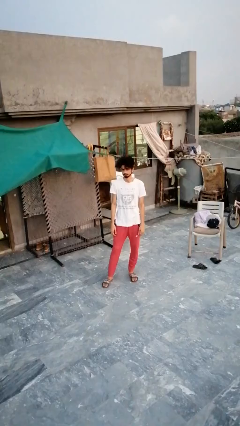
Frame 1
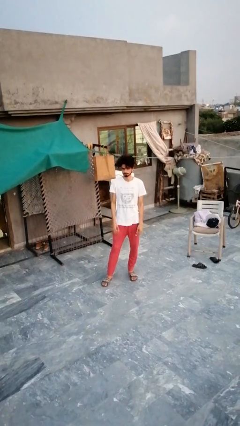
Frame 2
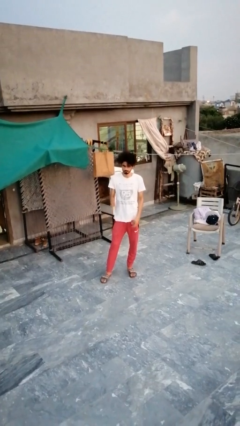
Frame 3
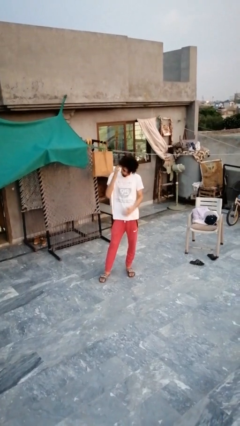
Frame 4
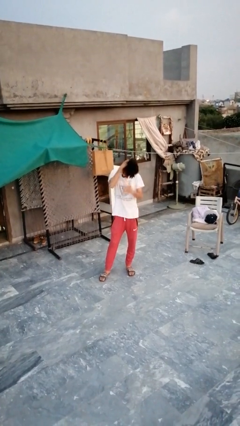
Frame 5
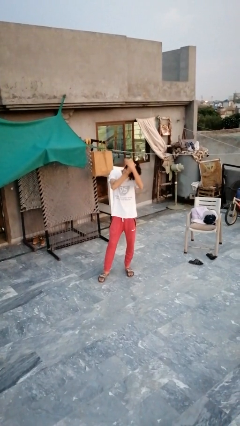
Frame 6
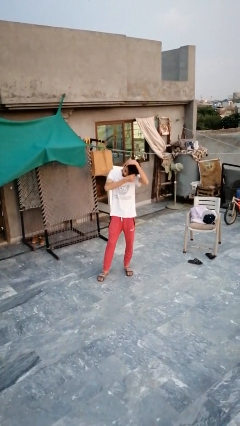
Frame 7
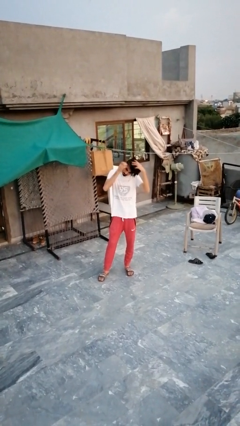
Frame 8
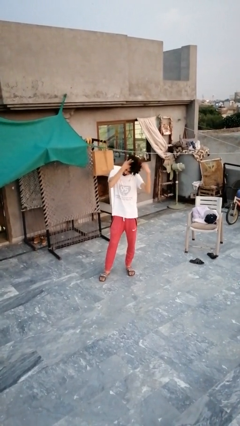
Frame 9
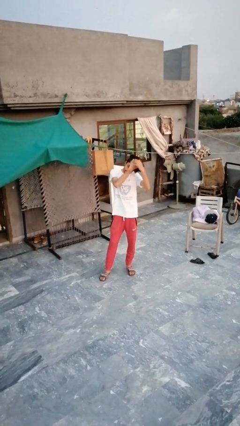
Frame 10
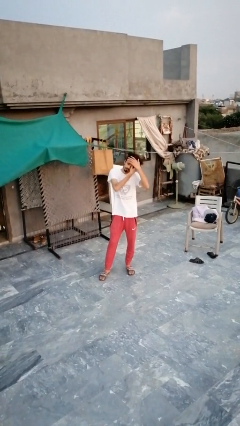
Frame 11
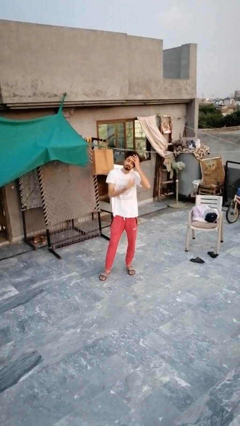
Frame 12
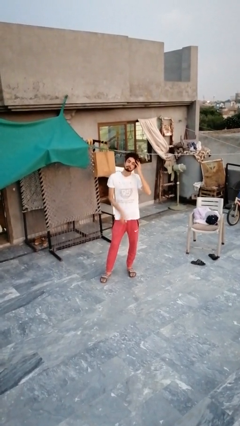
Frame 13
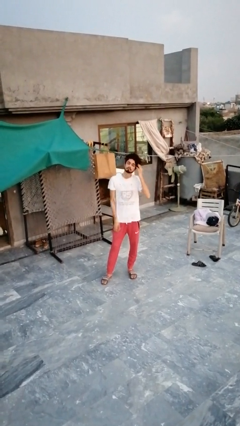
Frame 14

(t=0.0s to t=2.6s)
person strokes hair

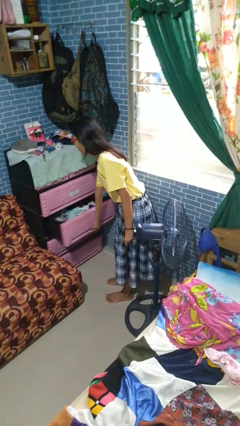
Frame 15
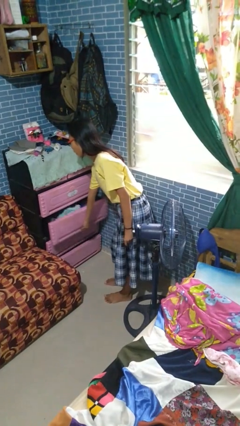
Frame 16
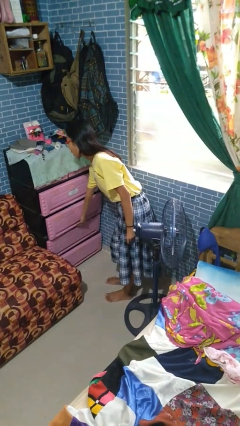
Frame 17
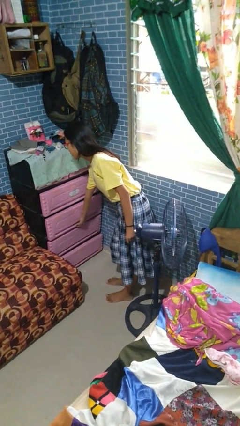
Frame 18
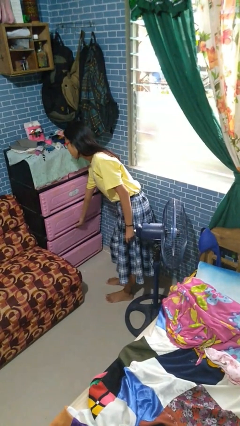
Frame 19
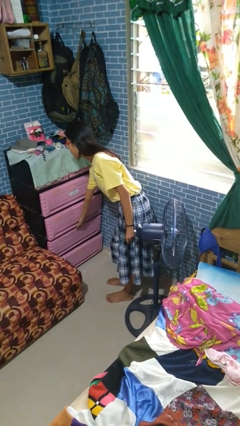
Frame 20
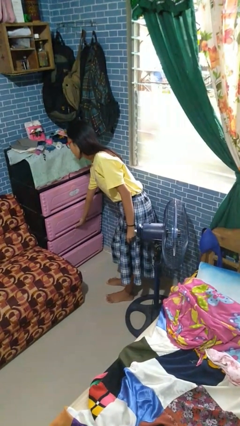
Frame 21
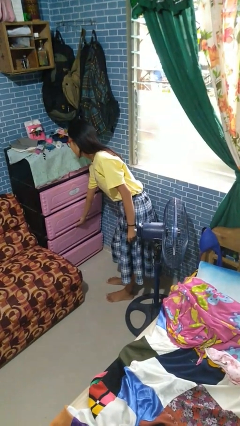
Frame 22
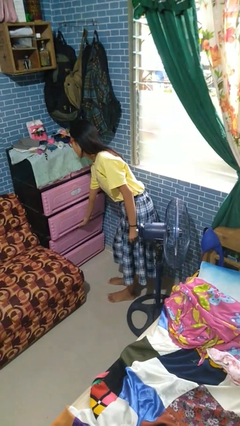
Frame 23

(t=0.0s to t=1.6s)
person closes dresser drawer

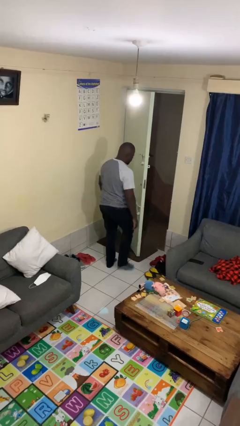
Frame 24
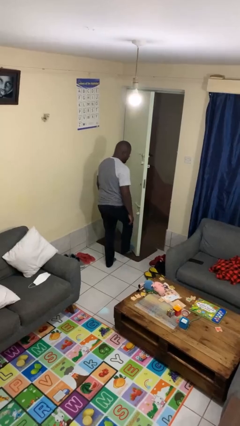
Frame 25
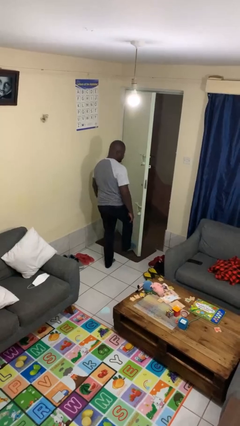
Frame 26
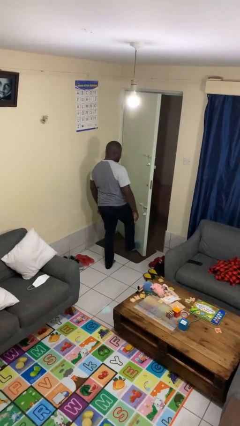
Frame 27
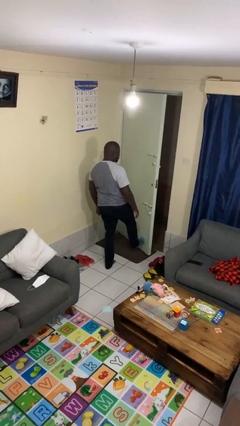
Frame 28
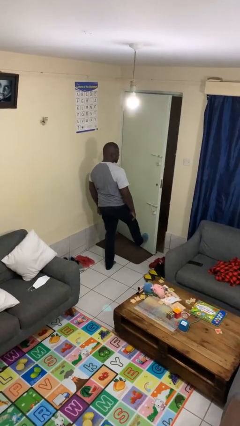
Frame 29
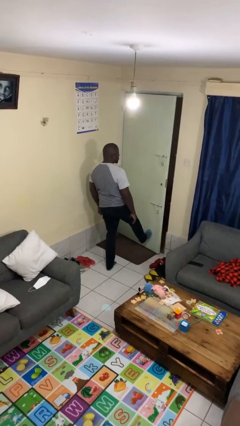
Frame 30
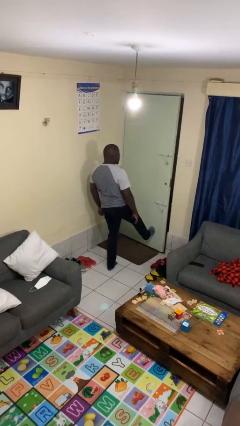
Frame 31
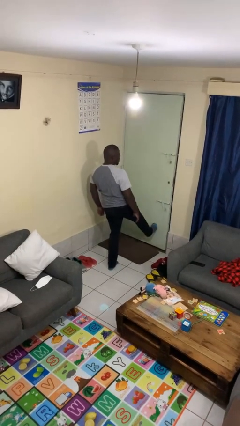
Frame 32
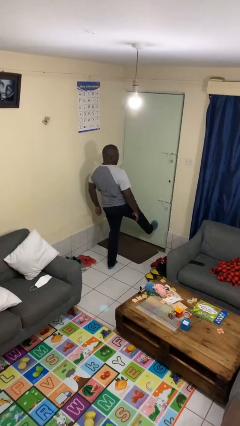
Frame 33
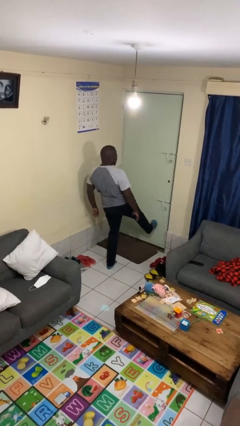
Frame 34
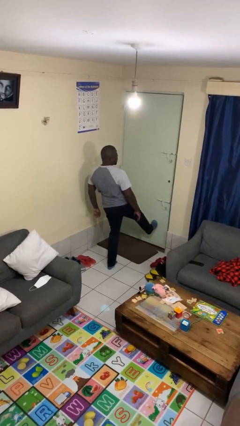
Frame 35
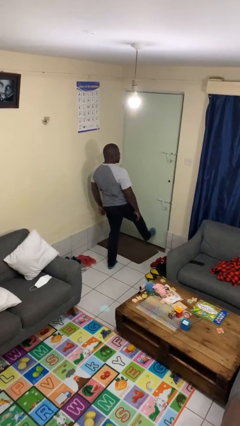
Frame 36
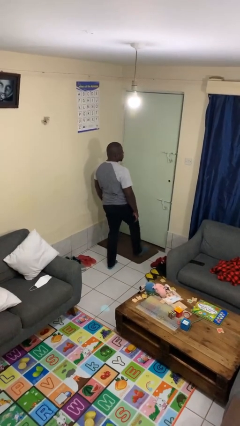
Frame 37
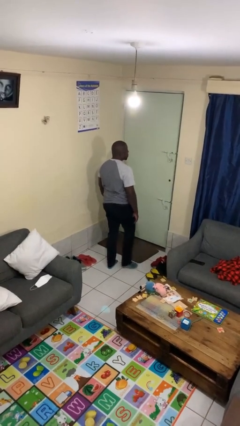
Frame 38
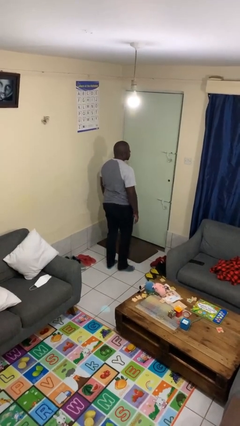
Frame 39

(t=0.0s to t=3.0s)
person closes door with foot

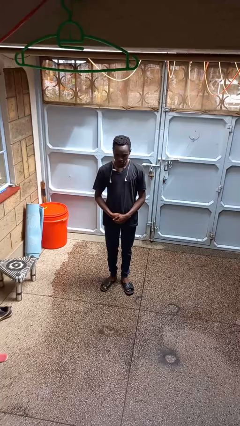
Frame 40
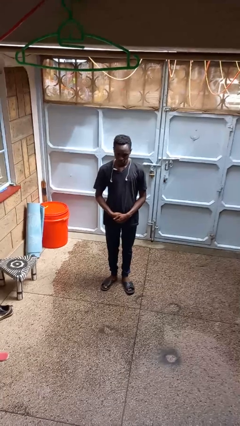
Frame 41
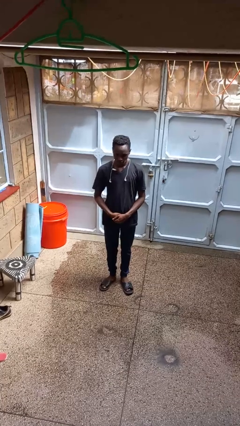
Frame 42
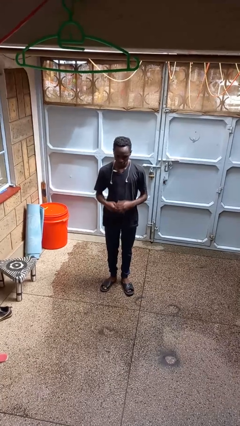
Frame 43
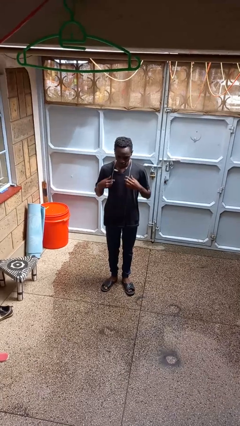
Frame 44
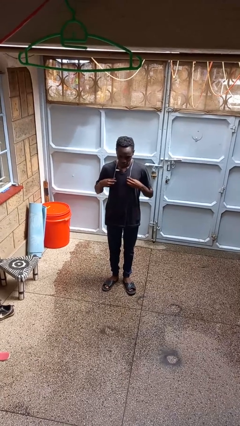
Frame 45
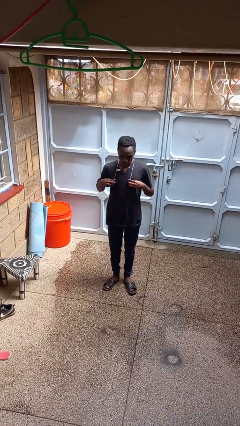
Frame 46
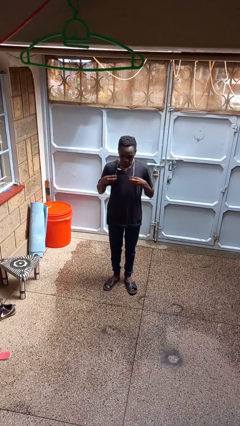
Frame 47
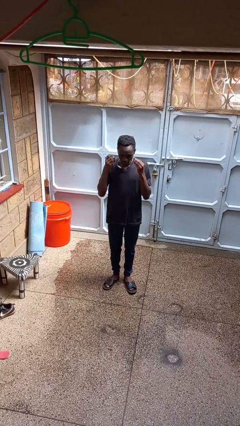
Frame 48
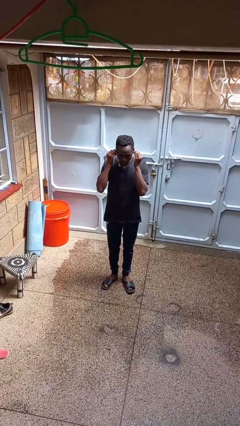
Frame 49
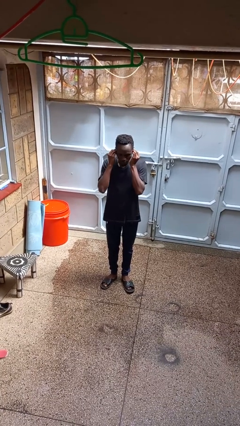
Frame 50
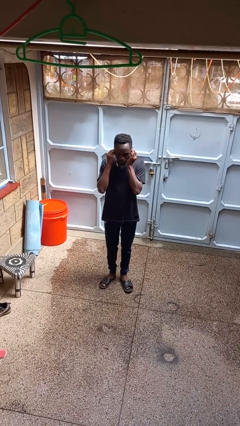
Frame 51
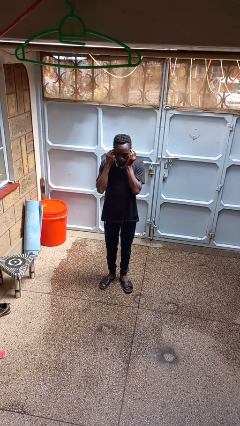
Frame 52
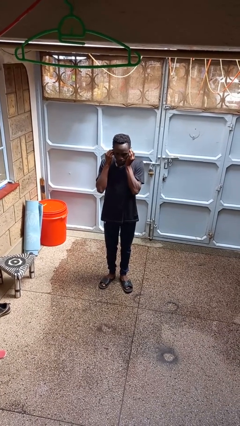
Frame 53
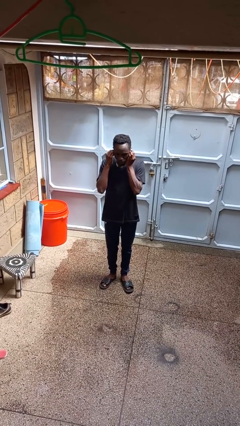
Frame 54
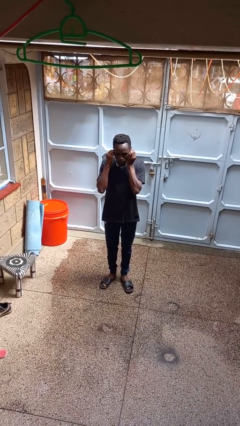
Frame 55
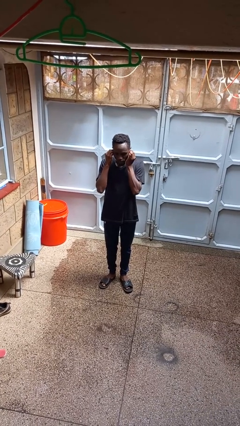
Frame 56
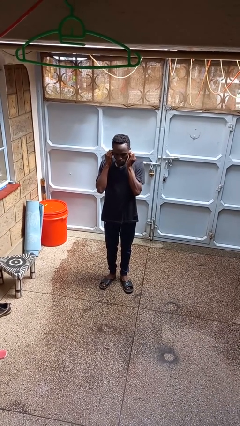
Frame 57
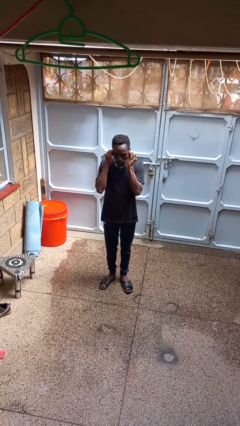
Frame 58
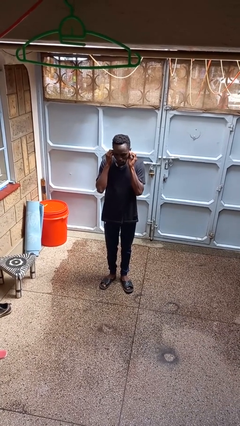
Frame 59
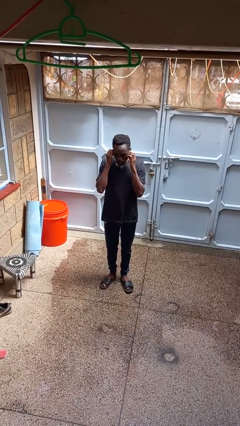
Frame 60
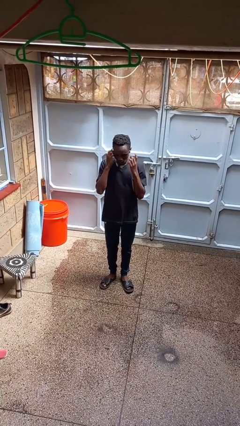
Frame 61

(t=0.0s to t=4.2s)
person puts on headphones

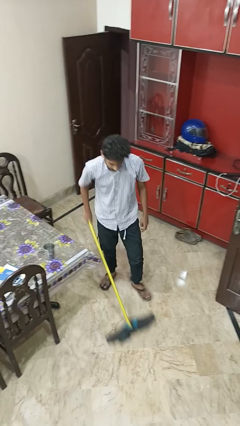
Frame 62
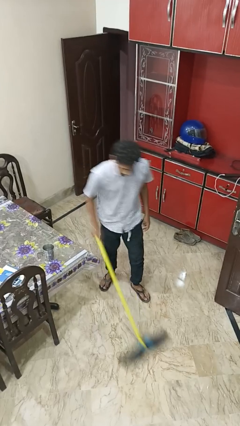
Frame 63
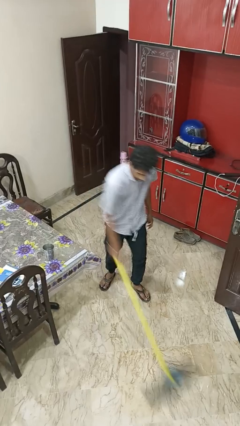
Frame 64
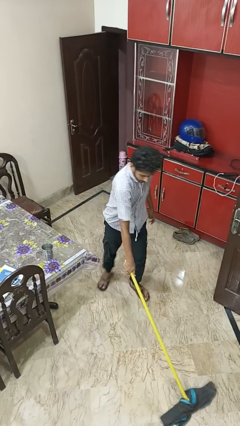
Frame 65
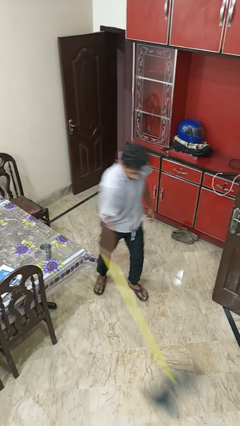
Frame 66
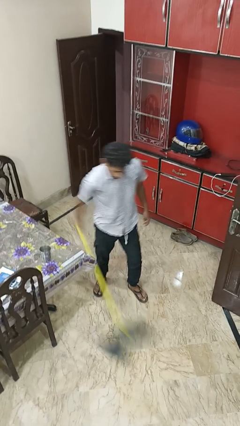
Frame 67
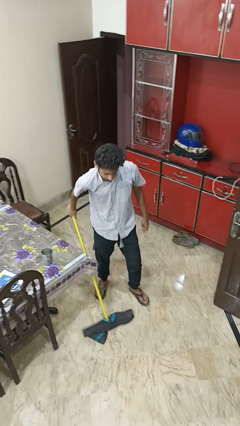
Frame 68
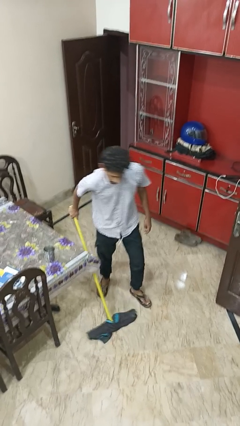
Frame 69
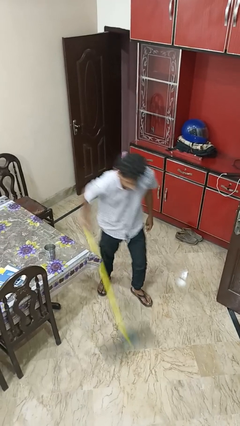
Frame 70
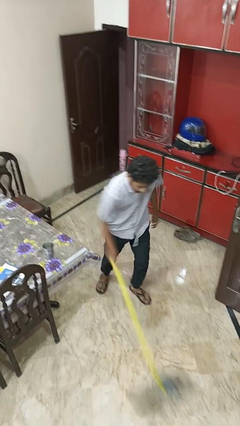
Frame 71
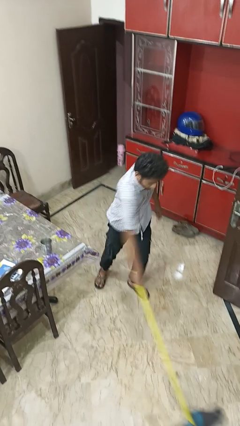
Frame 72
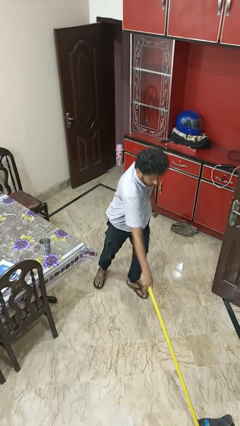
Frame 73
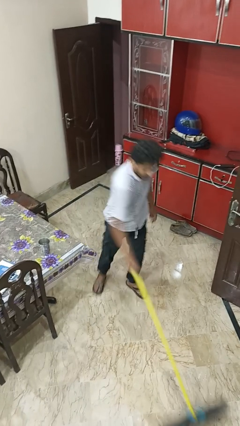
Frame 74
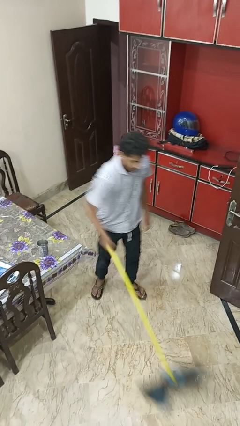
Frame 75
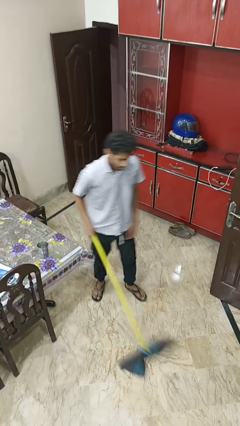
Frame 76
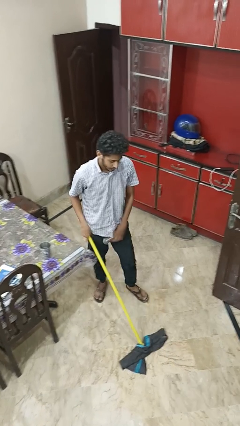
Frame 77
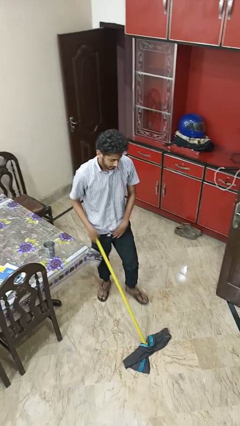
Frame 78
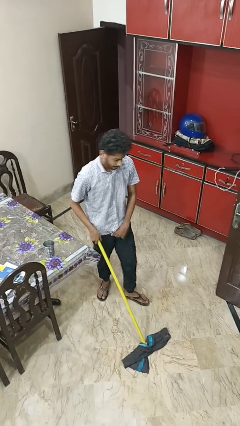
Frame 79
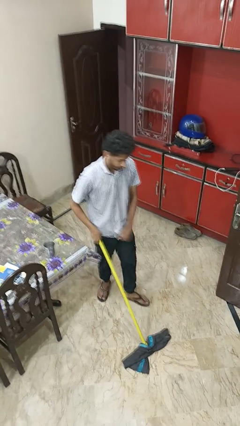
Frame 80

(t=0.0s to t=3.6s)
person mops

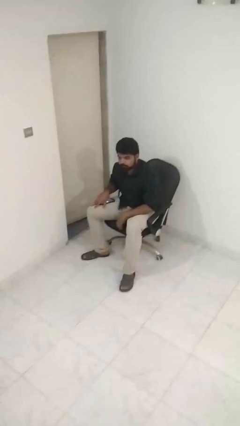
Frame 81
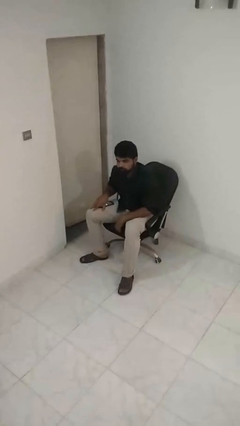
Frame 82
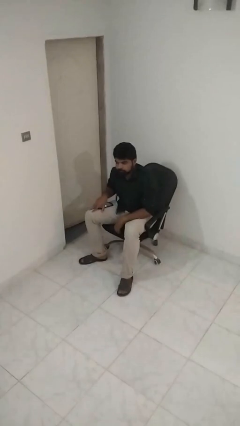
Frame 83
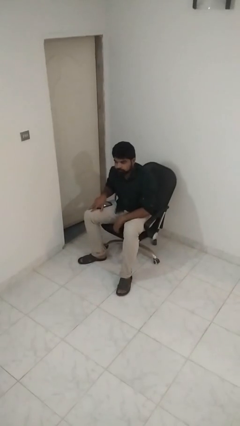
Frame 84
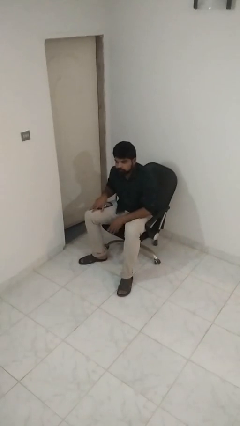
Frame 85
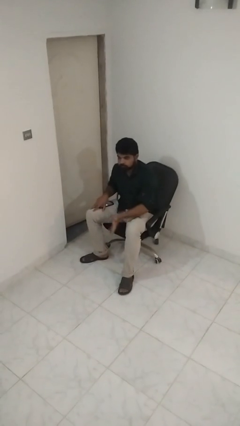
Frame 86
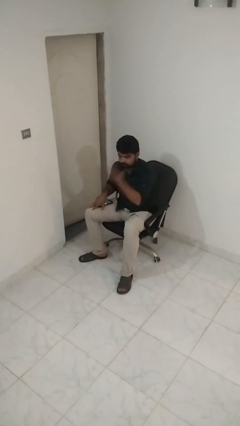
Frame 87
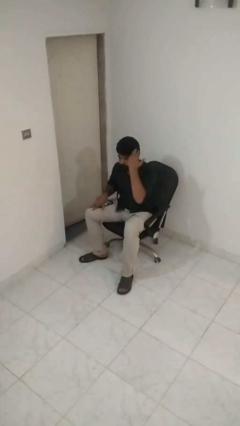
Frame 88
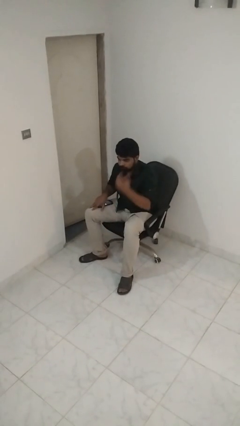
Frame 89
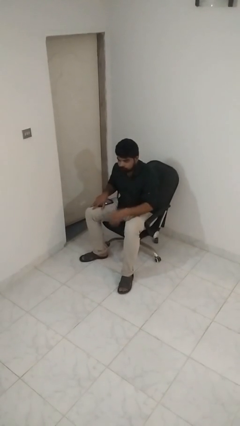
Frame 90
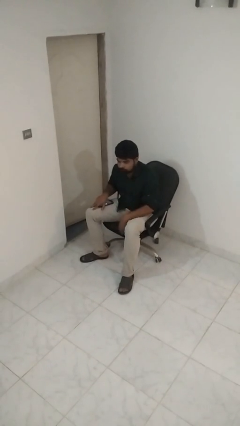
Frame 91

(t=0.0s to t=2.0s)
person gestures swipe up

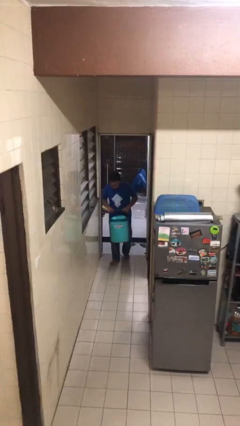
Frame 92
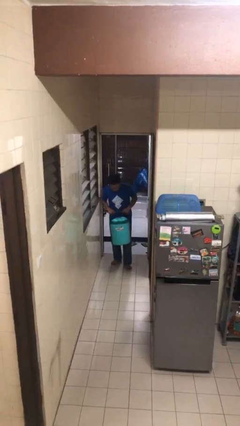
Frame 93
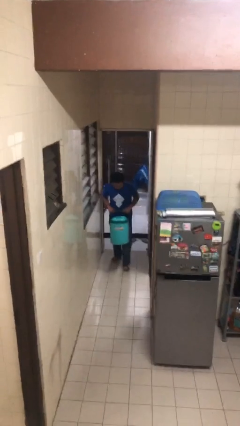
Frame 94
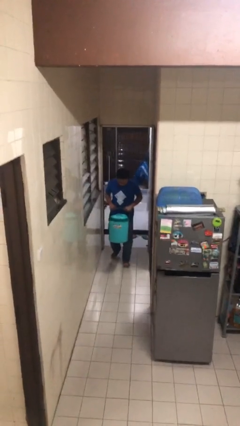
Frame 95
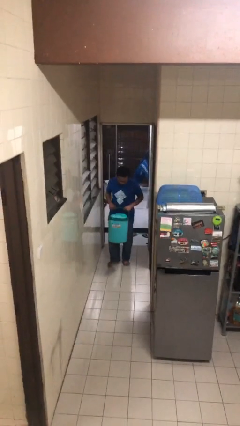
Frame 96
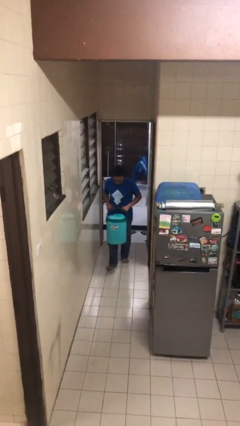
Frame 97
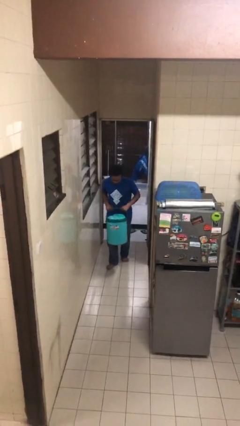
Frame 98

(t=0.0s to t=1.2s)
person carries heavy object
